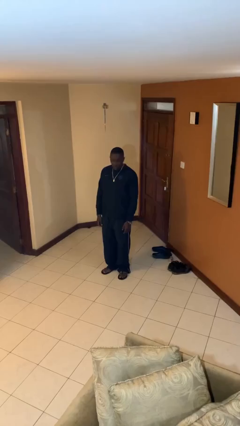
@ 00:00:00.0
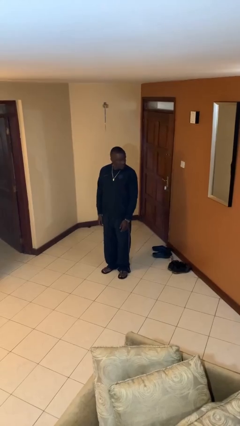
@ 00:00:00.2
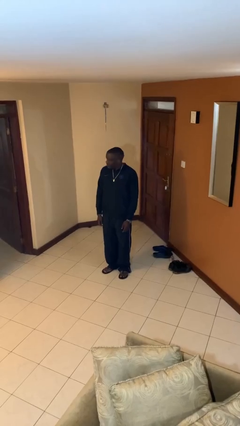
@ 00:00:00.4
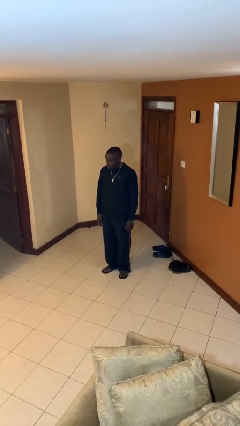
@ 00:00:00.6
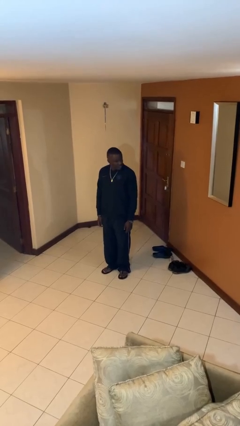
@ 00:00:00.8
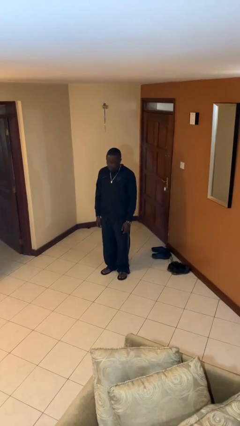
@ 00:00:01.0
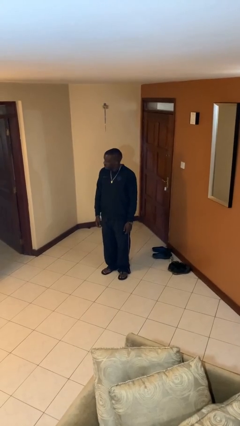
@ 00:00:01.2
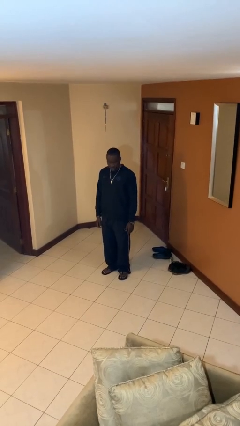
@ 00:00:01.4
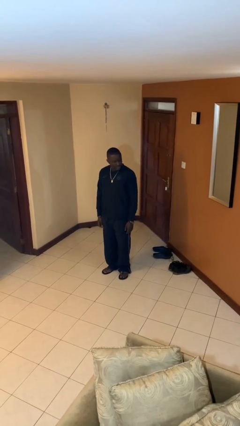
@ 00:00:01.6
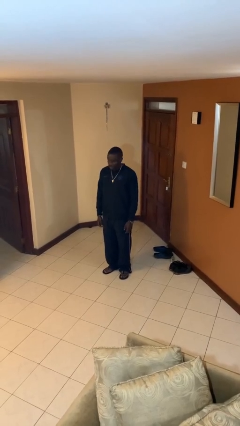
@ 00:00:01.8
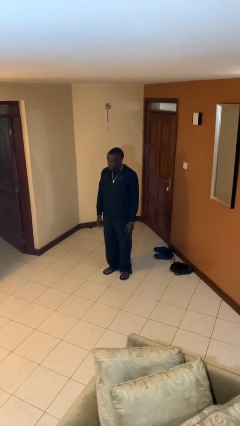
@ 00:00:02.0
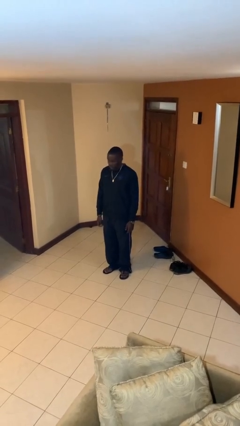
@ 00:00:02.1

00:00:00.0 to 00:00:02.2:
person shakes head

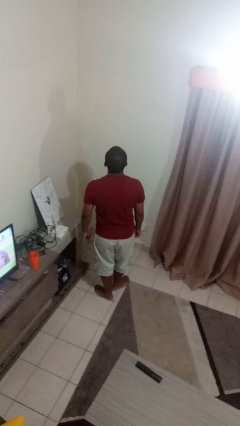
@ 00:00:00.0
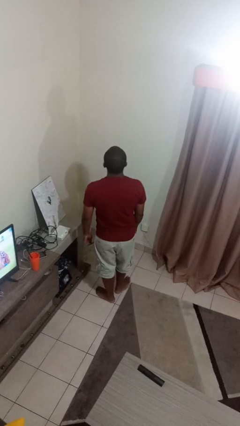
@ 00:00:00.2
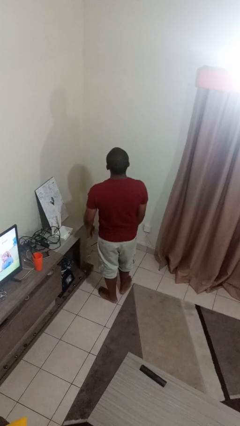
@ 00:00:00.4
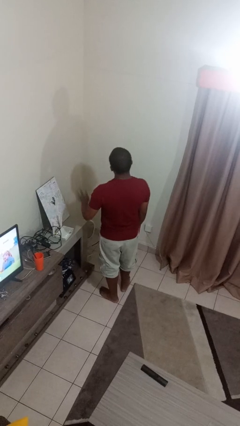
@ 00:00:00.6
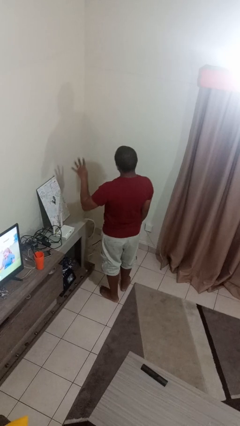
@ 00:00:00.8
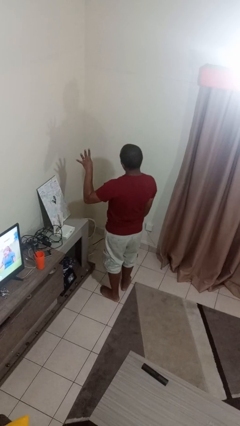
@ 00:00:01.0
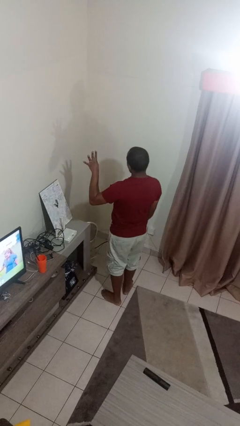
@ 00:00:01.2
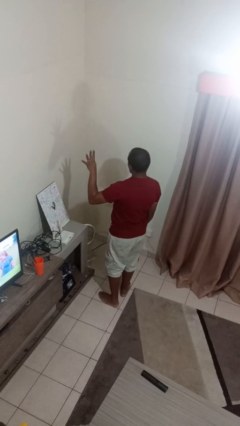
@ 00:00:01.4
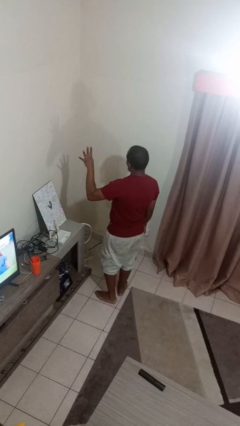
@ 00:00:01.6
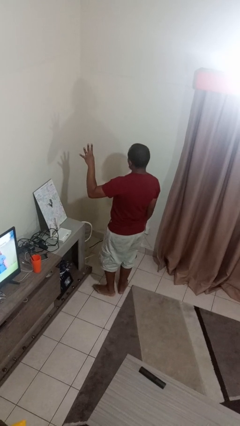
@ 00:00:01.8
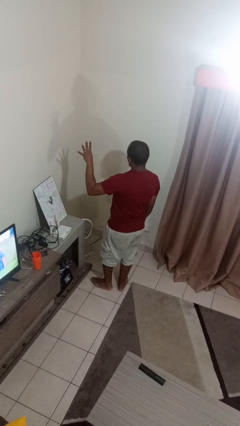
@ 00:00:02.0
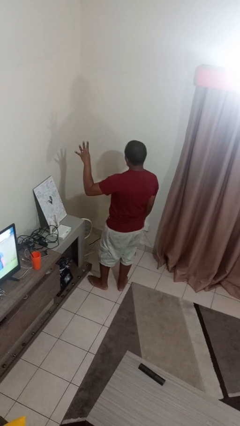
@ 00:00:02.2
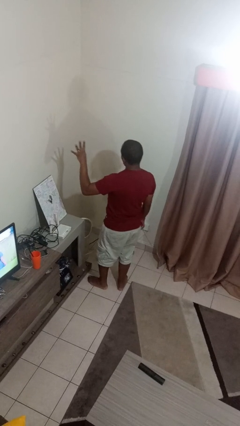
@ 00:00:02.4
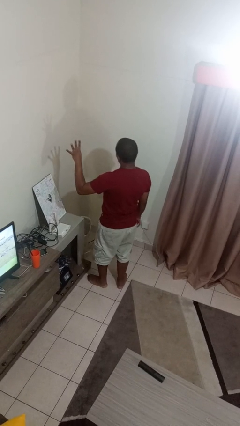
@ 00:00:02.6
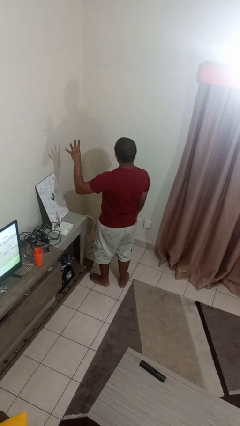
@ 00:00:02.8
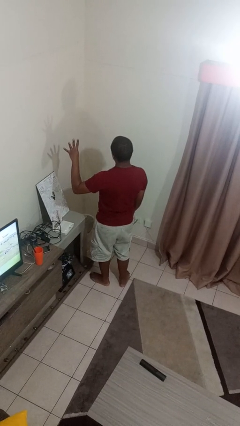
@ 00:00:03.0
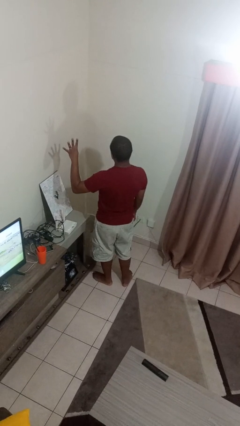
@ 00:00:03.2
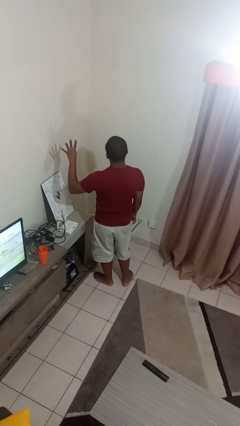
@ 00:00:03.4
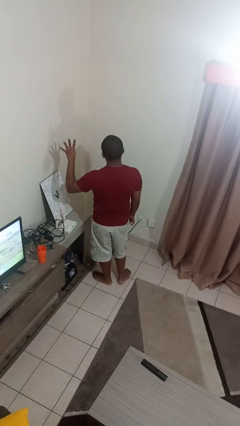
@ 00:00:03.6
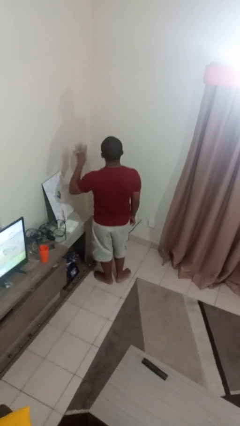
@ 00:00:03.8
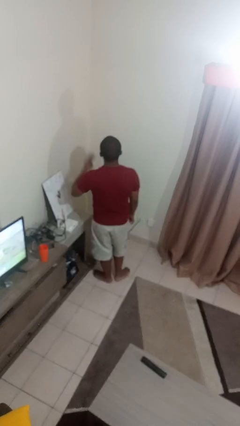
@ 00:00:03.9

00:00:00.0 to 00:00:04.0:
person gestures number four

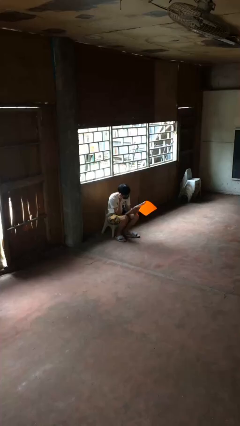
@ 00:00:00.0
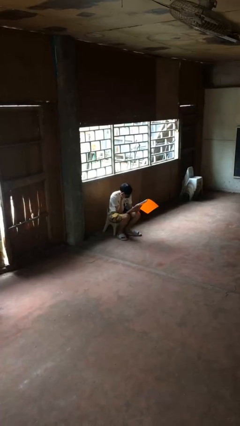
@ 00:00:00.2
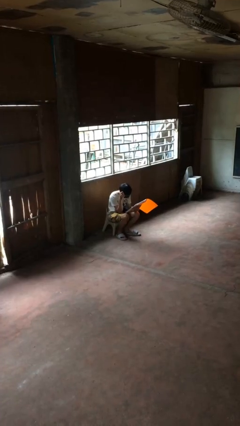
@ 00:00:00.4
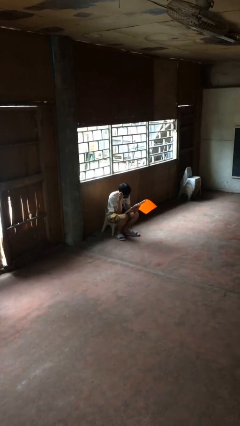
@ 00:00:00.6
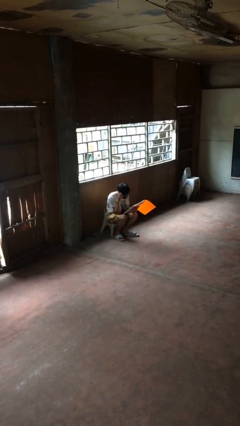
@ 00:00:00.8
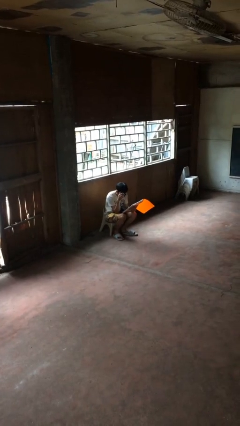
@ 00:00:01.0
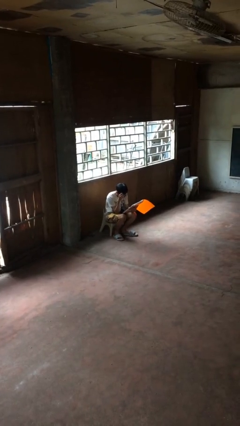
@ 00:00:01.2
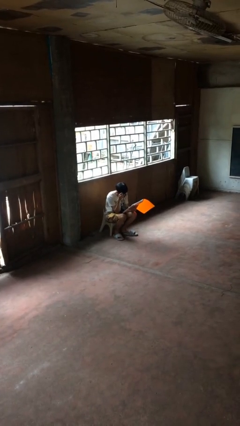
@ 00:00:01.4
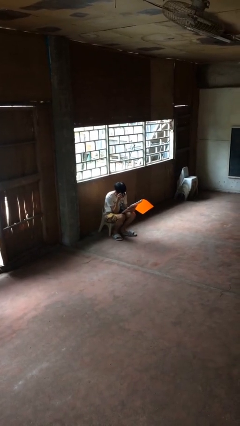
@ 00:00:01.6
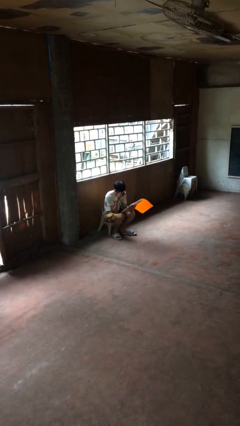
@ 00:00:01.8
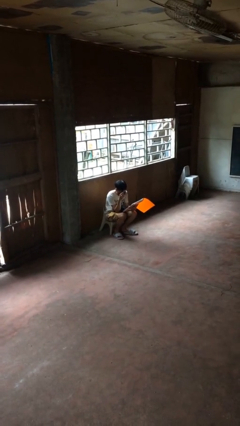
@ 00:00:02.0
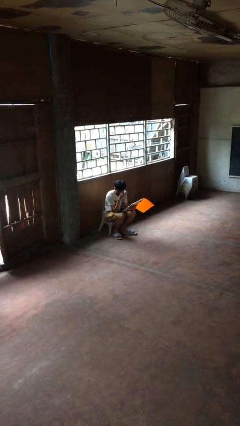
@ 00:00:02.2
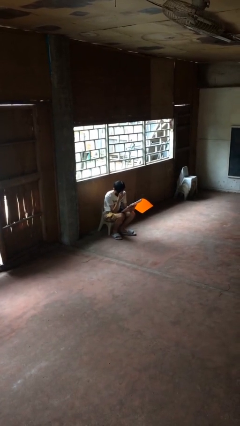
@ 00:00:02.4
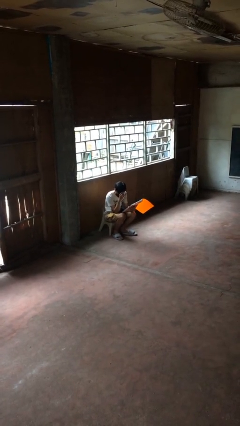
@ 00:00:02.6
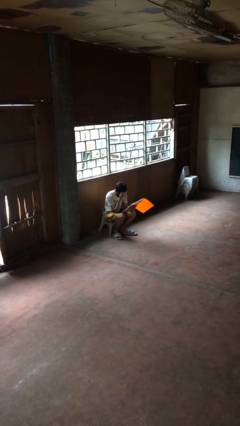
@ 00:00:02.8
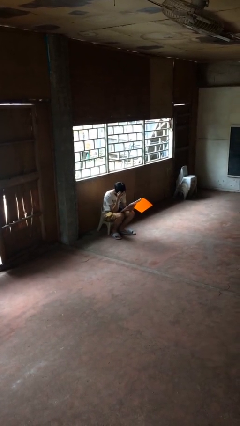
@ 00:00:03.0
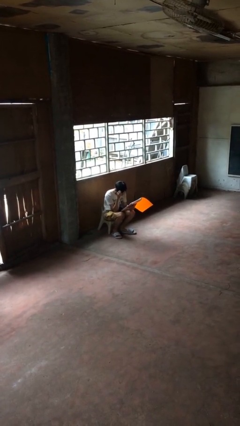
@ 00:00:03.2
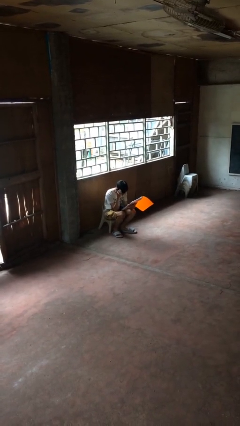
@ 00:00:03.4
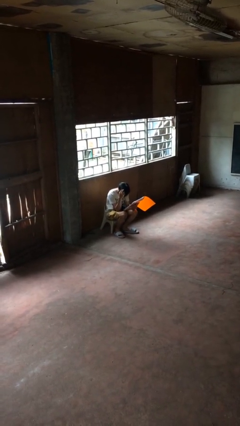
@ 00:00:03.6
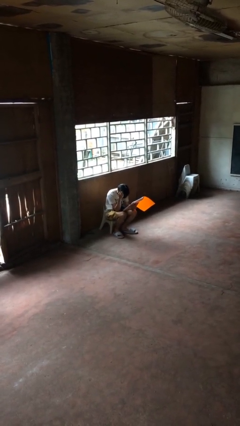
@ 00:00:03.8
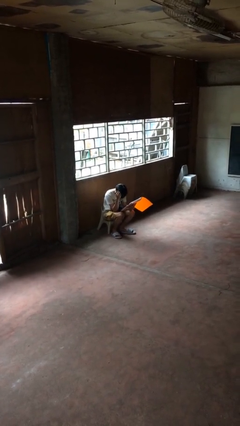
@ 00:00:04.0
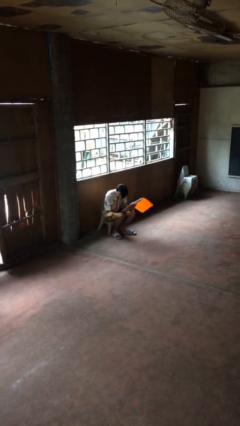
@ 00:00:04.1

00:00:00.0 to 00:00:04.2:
person reads document

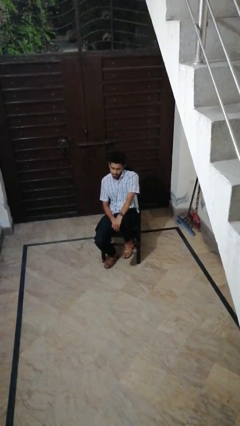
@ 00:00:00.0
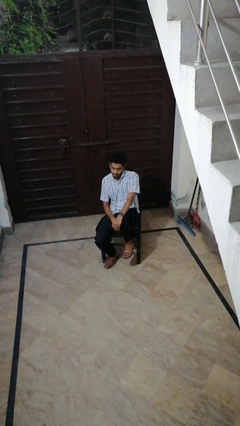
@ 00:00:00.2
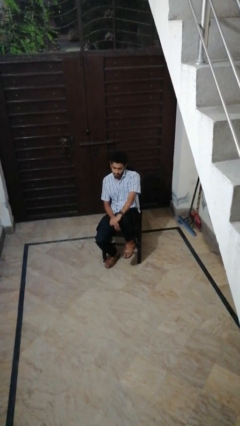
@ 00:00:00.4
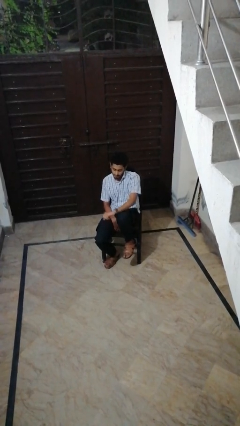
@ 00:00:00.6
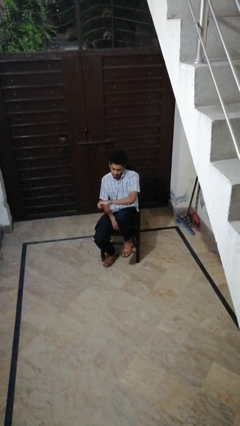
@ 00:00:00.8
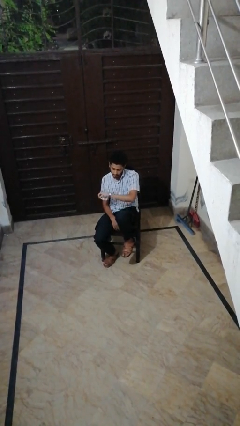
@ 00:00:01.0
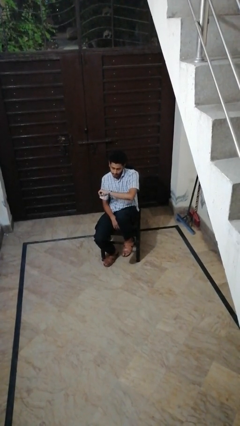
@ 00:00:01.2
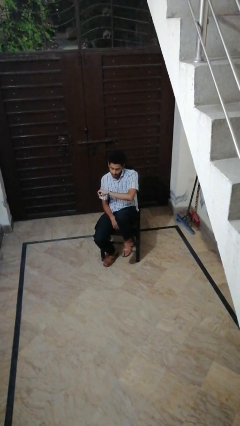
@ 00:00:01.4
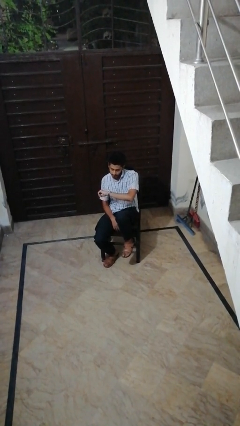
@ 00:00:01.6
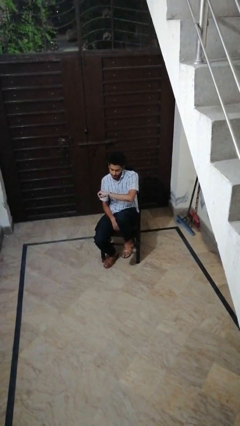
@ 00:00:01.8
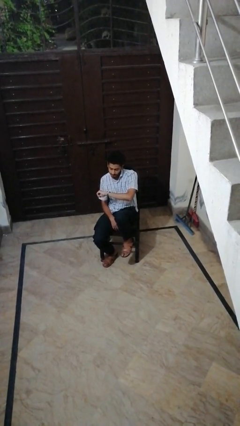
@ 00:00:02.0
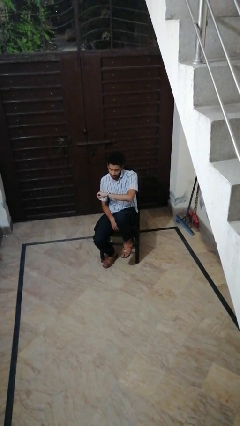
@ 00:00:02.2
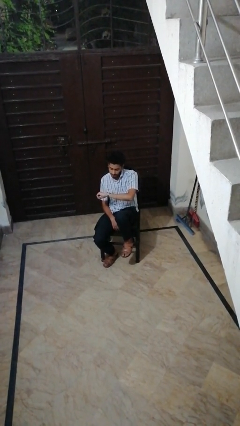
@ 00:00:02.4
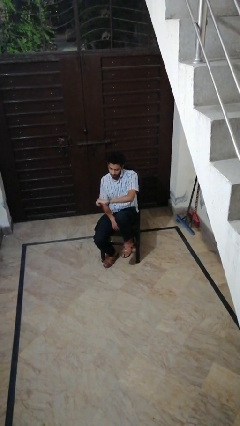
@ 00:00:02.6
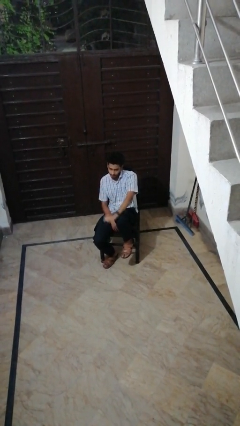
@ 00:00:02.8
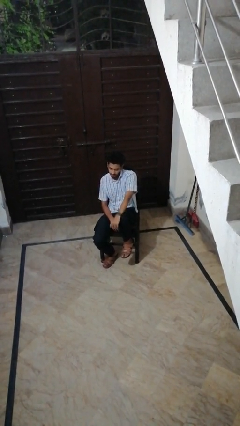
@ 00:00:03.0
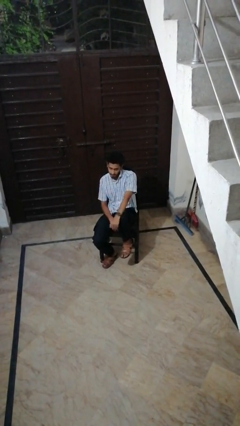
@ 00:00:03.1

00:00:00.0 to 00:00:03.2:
person looks at wristwatch

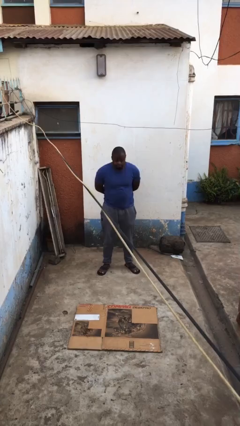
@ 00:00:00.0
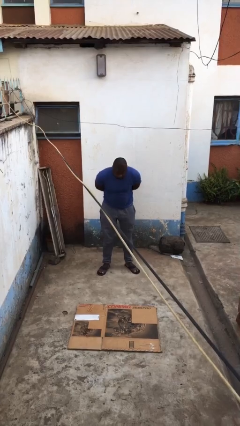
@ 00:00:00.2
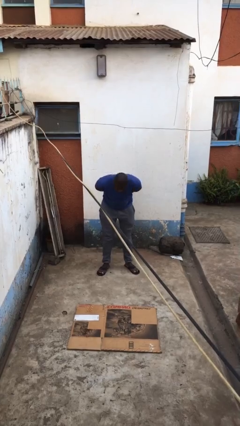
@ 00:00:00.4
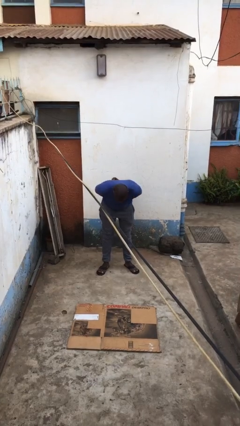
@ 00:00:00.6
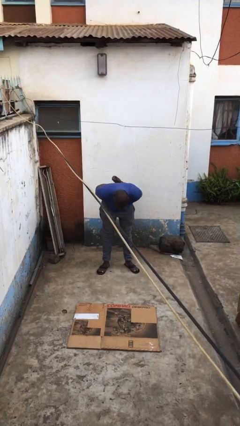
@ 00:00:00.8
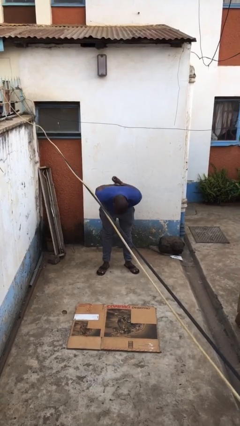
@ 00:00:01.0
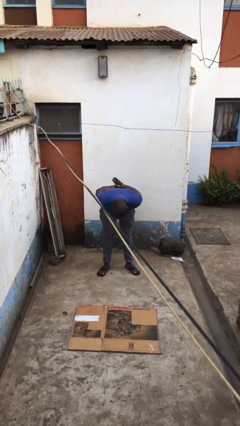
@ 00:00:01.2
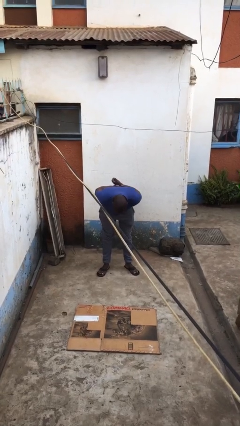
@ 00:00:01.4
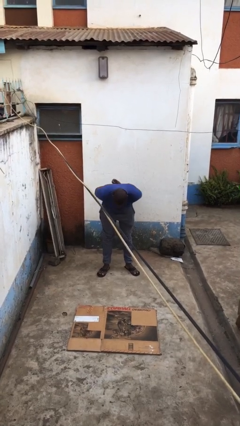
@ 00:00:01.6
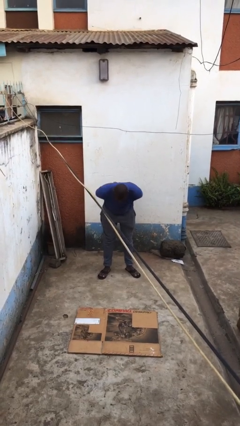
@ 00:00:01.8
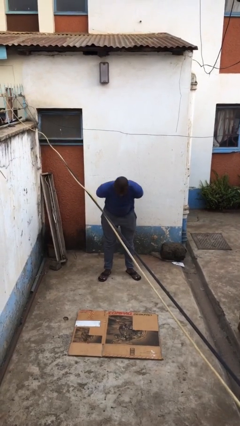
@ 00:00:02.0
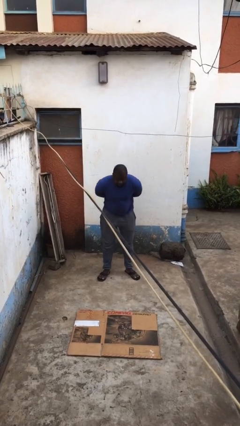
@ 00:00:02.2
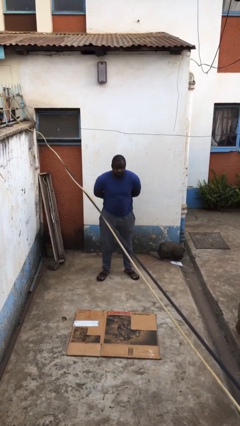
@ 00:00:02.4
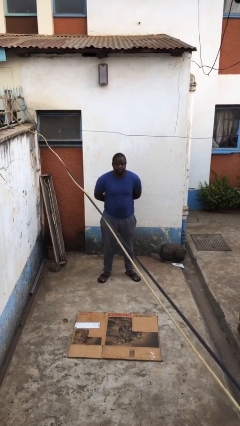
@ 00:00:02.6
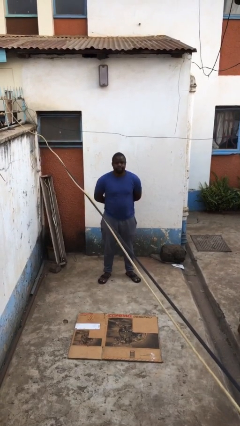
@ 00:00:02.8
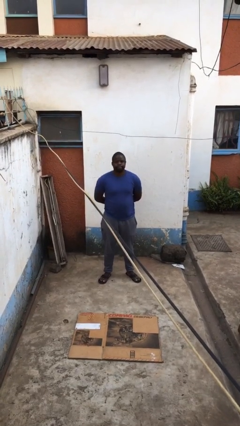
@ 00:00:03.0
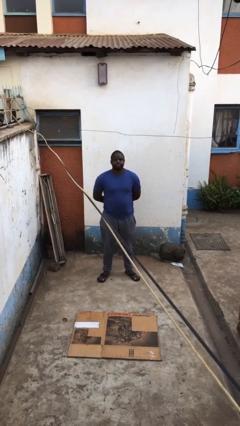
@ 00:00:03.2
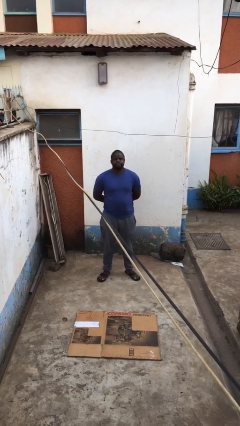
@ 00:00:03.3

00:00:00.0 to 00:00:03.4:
person bows
